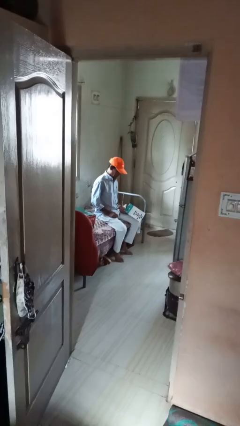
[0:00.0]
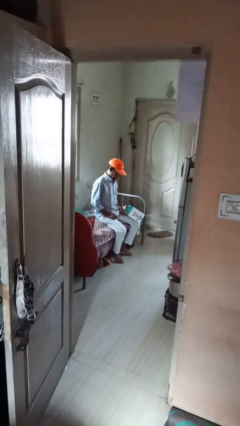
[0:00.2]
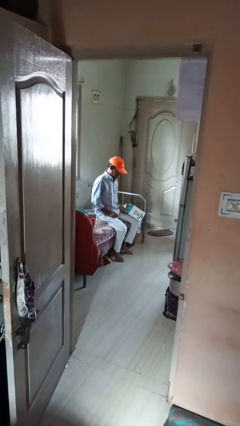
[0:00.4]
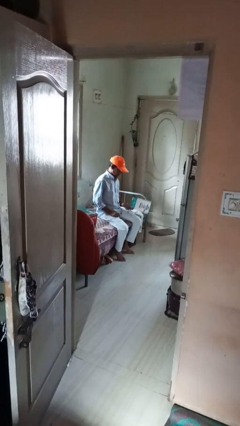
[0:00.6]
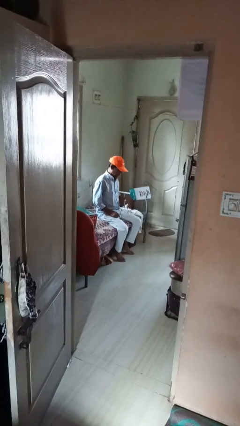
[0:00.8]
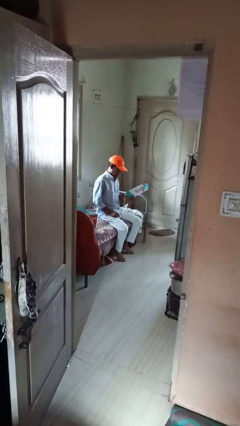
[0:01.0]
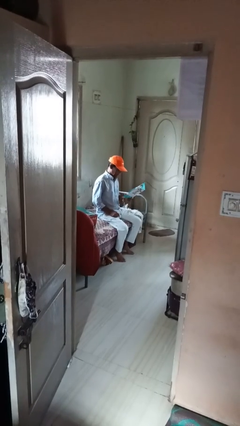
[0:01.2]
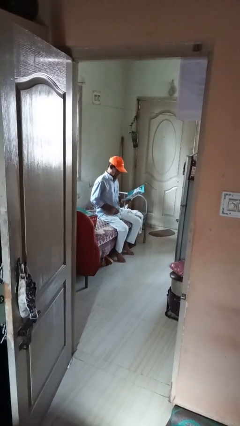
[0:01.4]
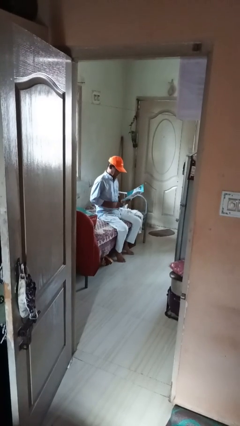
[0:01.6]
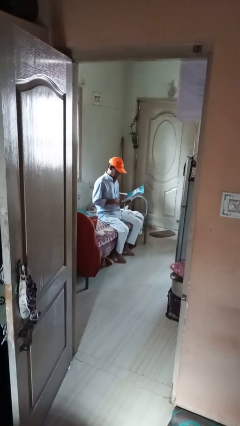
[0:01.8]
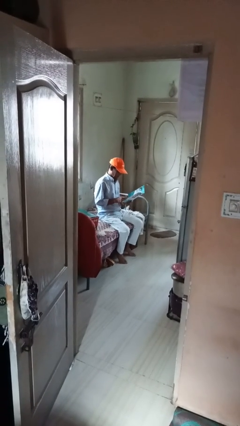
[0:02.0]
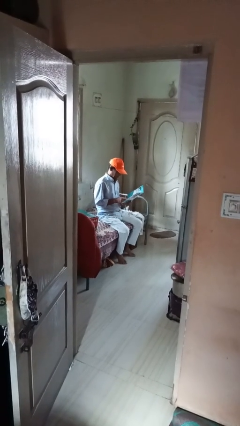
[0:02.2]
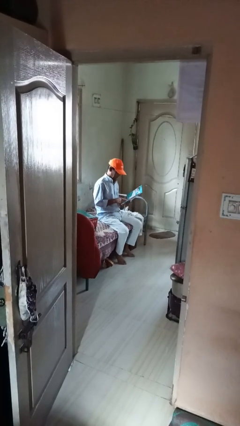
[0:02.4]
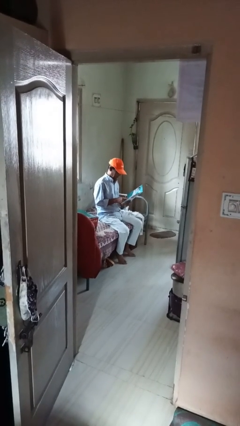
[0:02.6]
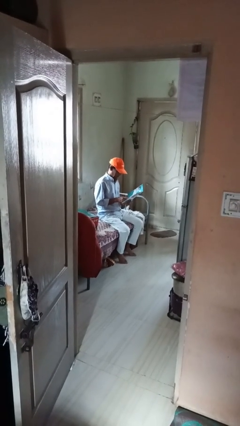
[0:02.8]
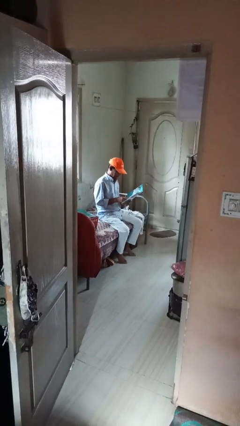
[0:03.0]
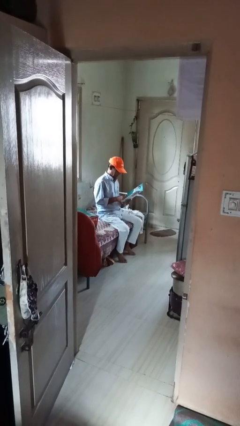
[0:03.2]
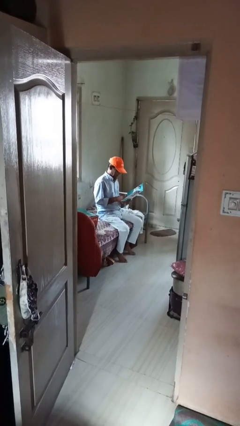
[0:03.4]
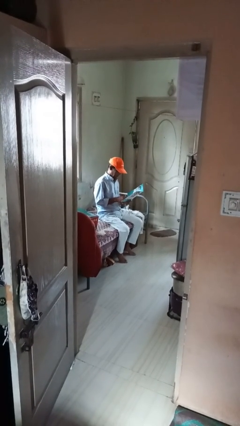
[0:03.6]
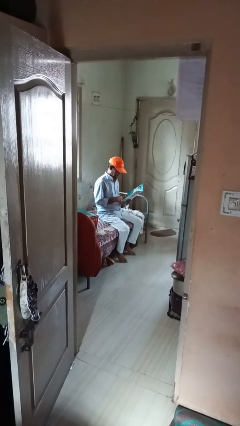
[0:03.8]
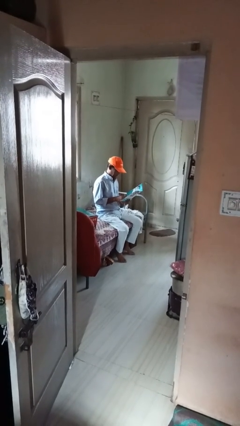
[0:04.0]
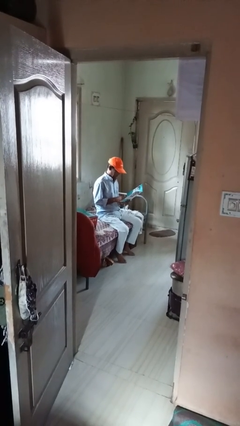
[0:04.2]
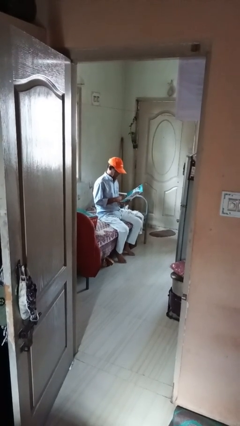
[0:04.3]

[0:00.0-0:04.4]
person reads magazine

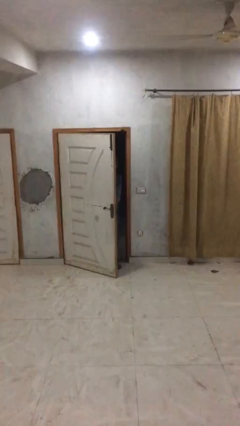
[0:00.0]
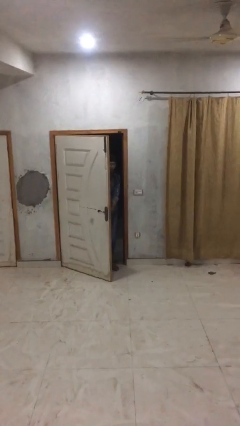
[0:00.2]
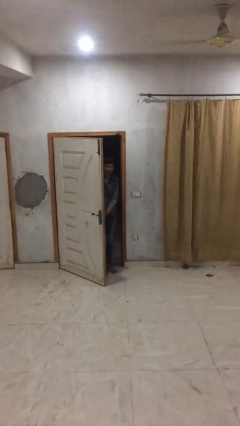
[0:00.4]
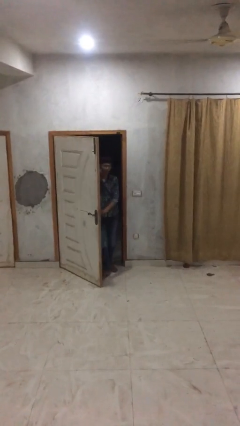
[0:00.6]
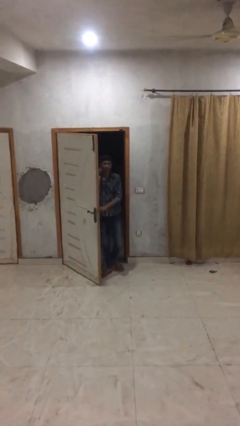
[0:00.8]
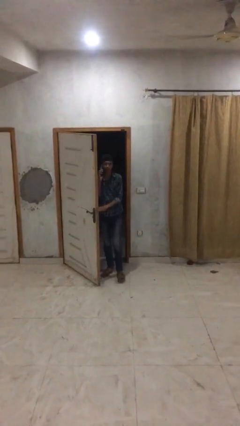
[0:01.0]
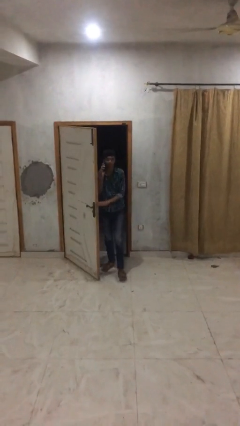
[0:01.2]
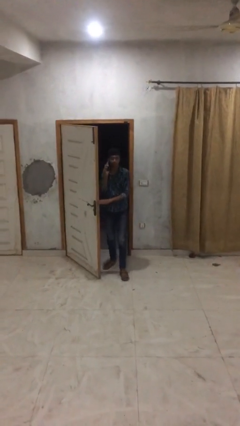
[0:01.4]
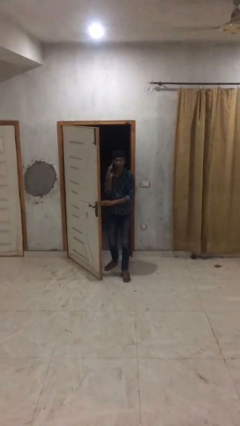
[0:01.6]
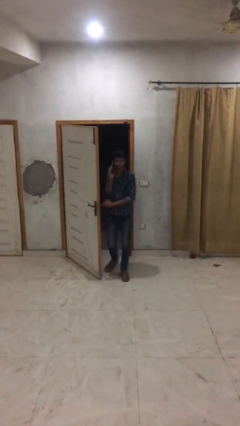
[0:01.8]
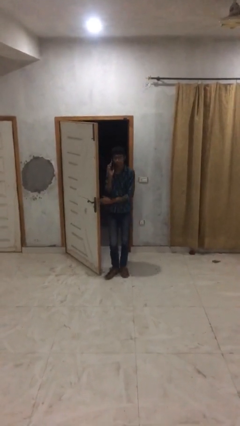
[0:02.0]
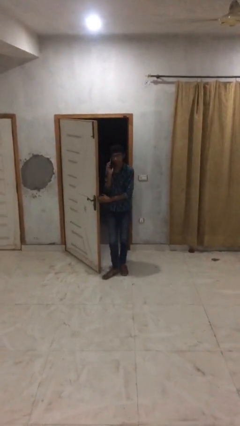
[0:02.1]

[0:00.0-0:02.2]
person enters scene through structure

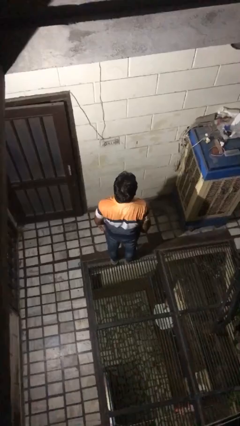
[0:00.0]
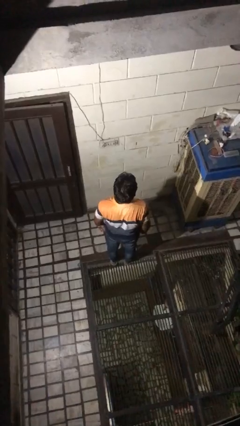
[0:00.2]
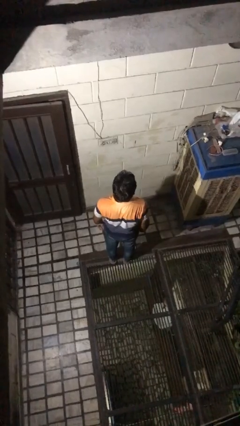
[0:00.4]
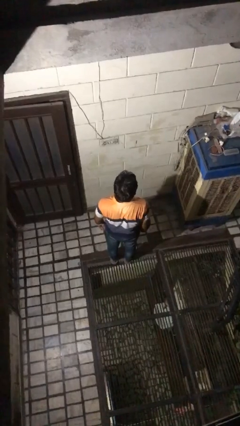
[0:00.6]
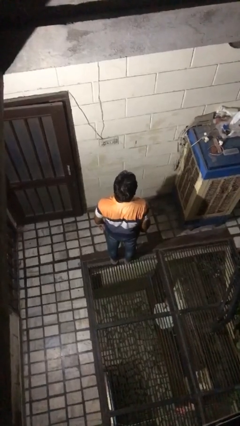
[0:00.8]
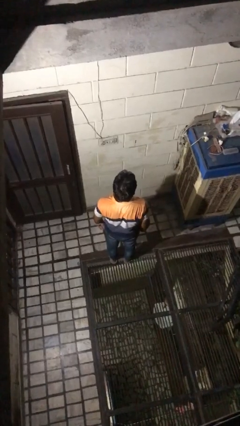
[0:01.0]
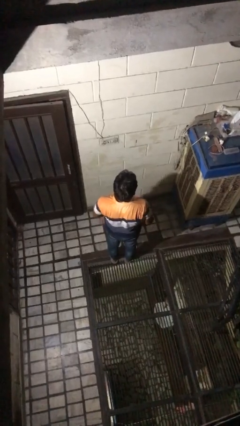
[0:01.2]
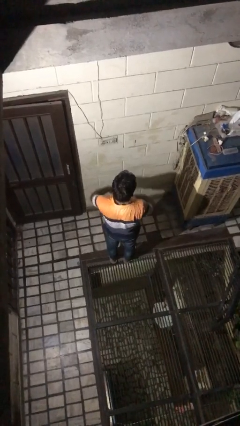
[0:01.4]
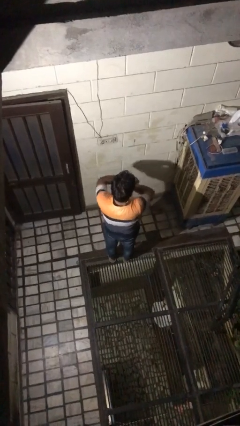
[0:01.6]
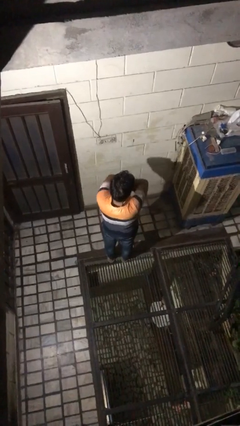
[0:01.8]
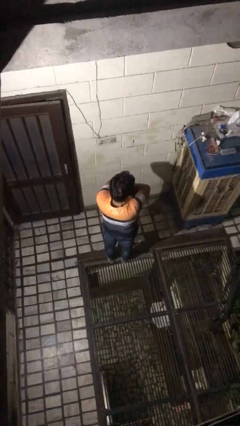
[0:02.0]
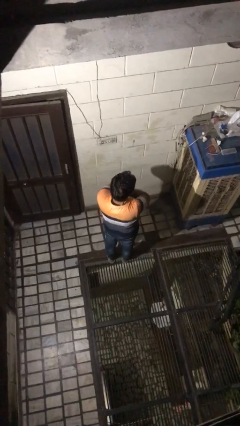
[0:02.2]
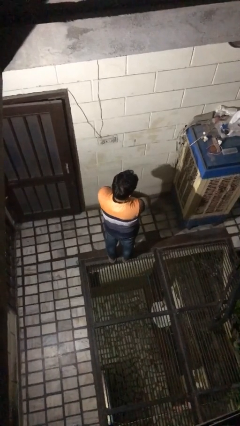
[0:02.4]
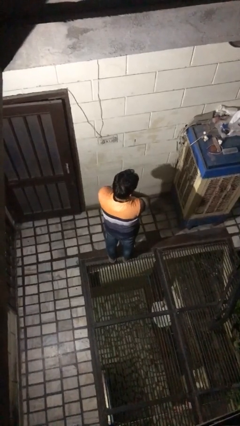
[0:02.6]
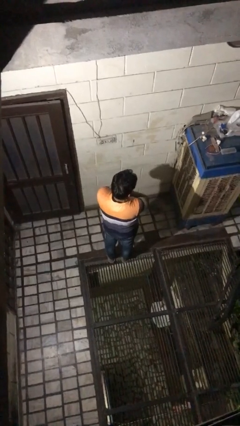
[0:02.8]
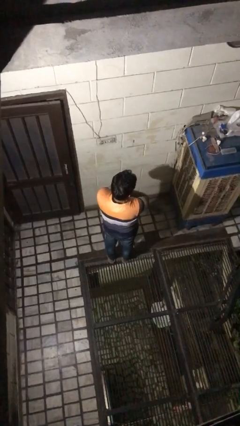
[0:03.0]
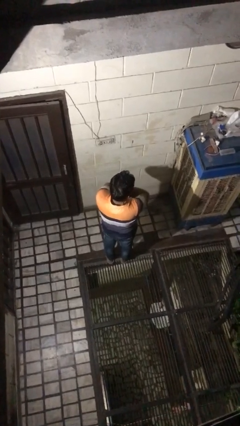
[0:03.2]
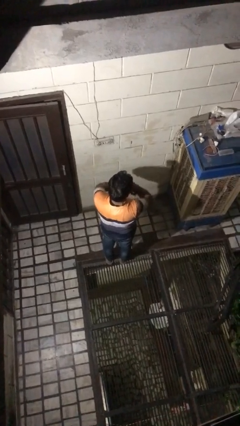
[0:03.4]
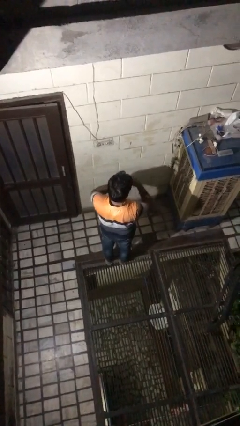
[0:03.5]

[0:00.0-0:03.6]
person crosses arms

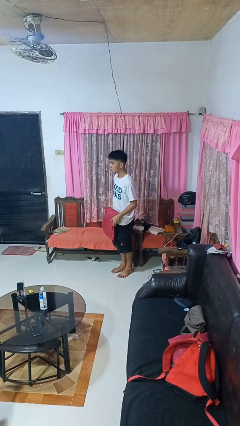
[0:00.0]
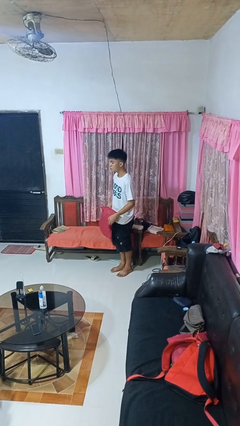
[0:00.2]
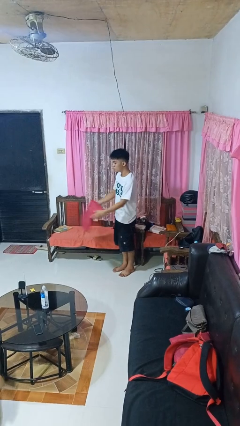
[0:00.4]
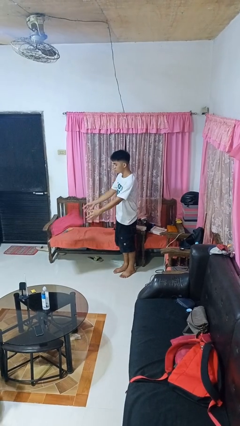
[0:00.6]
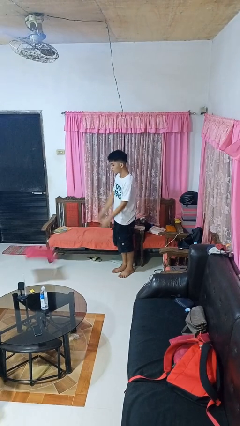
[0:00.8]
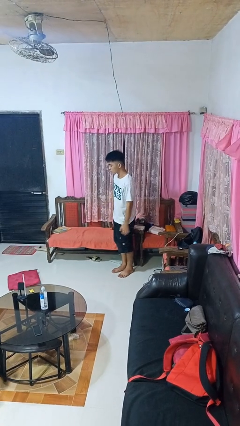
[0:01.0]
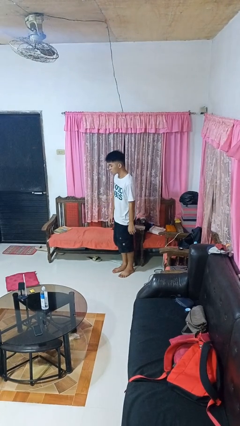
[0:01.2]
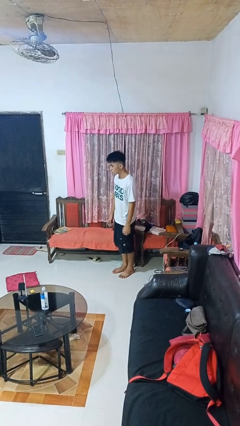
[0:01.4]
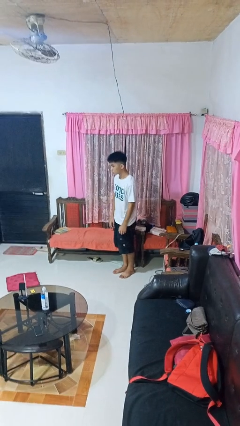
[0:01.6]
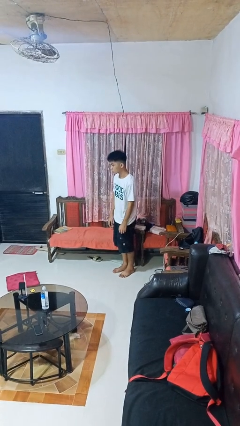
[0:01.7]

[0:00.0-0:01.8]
person throws object to ground

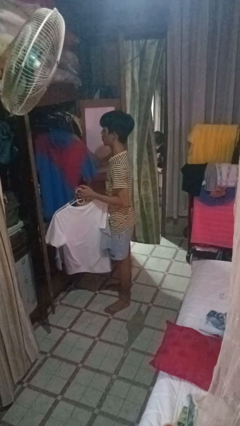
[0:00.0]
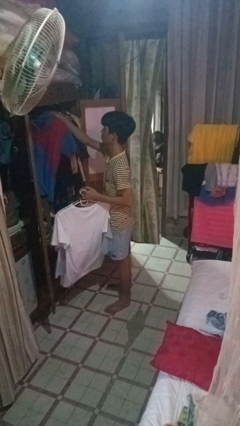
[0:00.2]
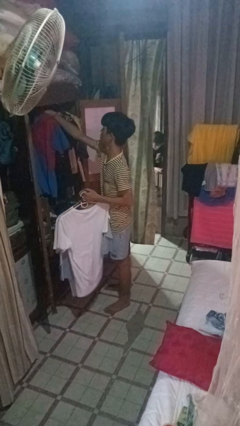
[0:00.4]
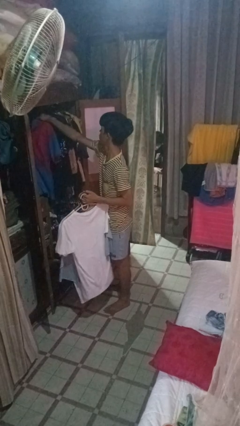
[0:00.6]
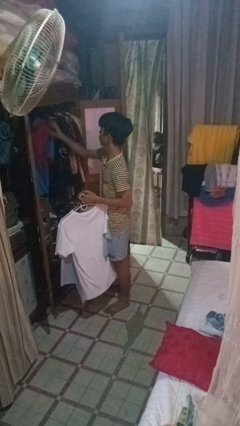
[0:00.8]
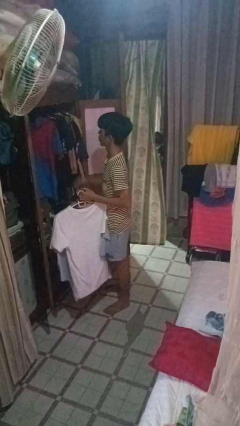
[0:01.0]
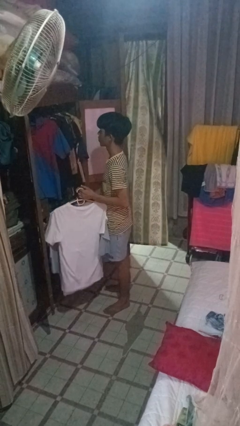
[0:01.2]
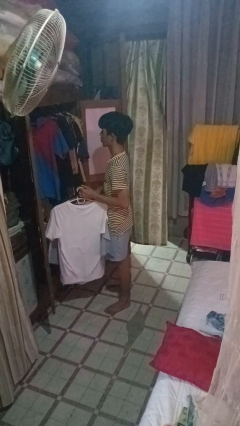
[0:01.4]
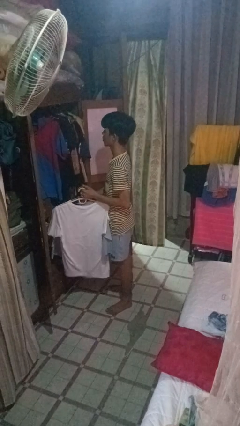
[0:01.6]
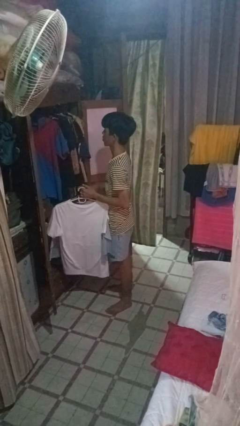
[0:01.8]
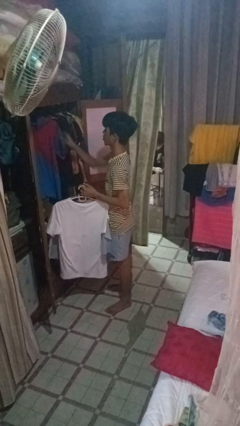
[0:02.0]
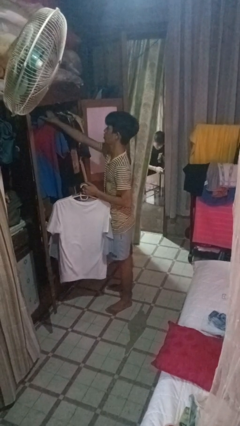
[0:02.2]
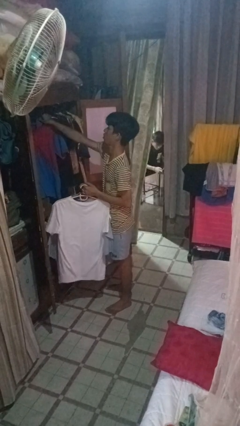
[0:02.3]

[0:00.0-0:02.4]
person puts clothes into closet

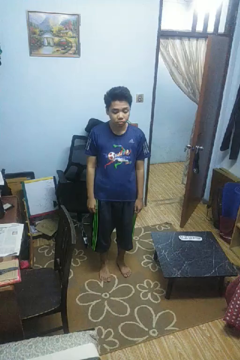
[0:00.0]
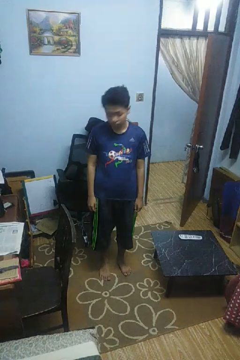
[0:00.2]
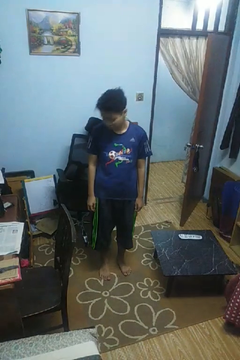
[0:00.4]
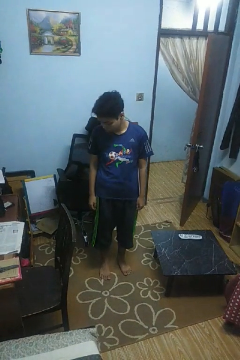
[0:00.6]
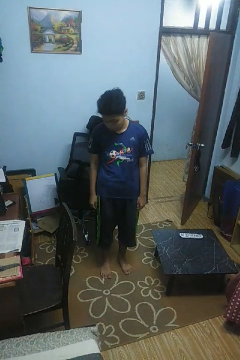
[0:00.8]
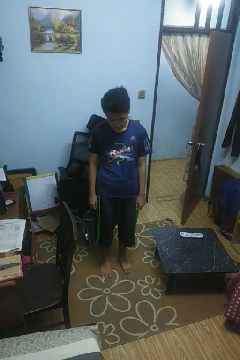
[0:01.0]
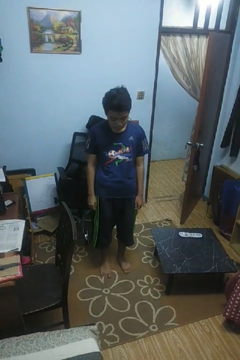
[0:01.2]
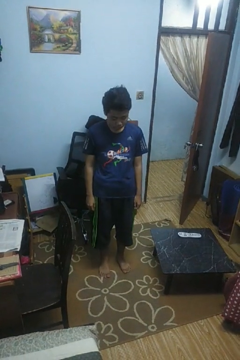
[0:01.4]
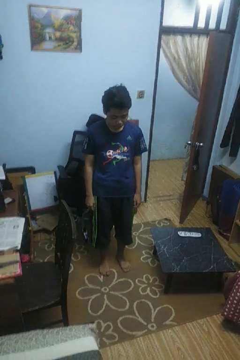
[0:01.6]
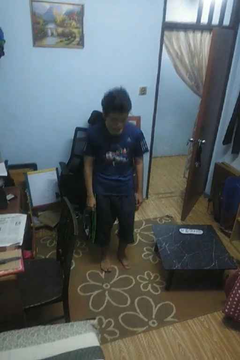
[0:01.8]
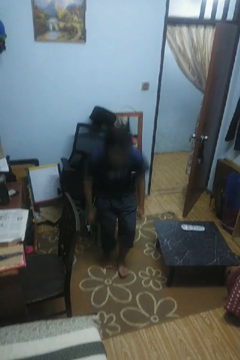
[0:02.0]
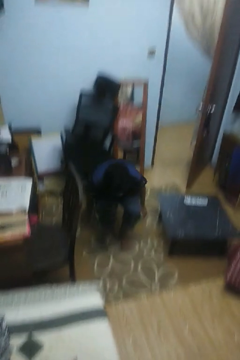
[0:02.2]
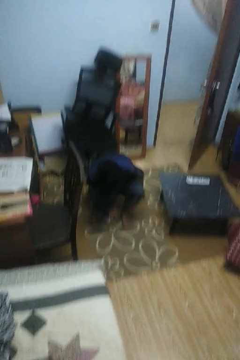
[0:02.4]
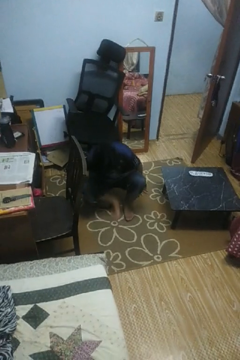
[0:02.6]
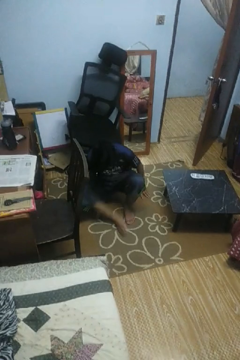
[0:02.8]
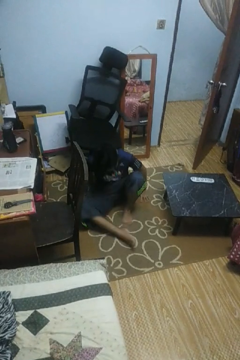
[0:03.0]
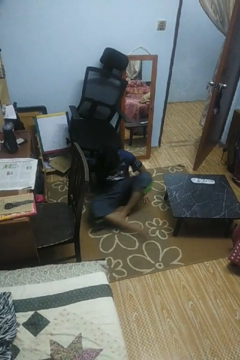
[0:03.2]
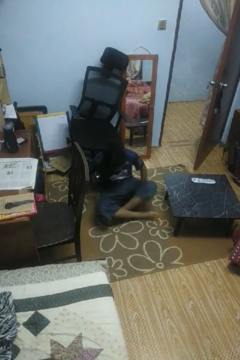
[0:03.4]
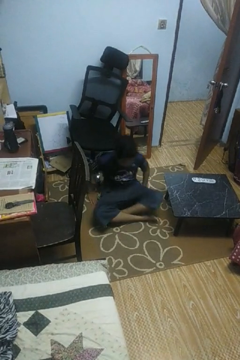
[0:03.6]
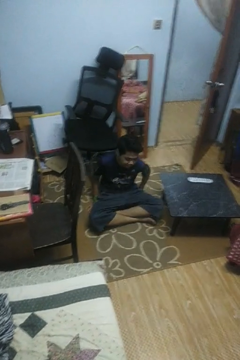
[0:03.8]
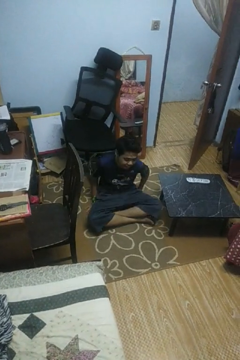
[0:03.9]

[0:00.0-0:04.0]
person sits crisscross
